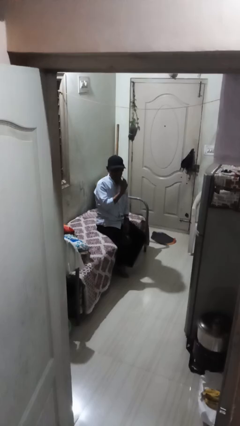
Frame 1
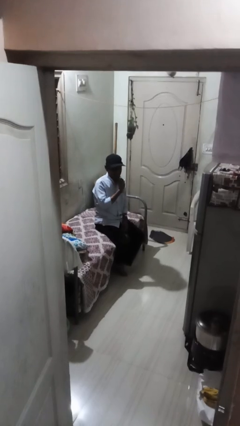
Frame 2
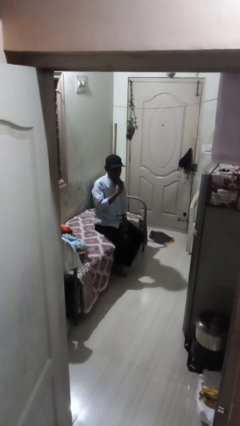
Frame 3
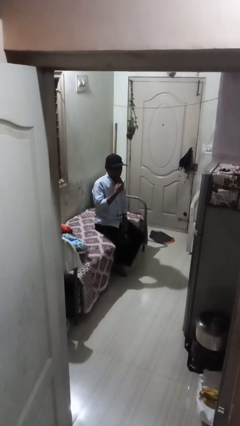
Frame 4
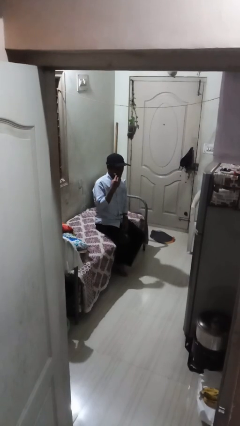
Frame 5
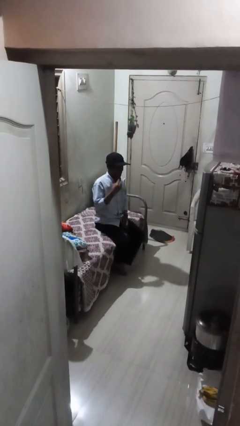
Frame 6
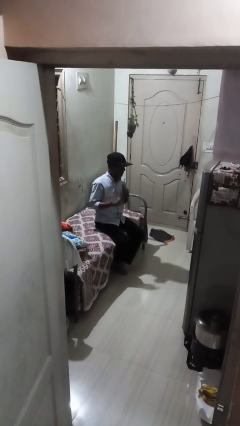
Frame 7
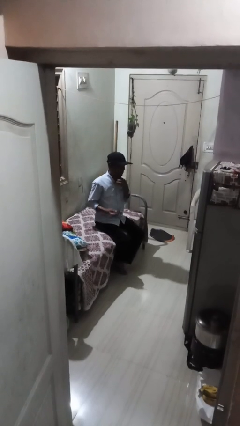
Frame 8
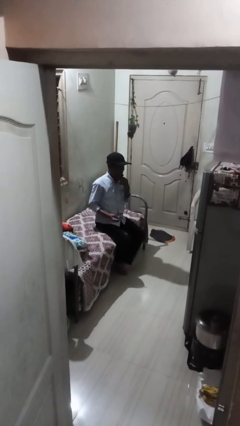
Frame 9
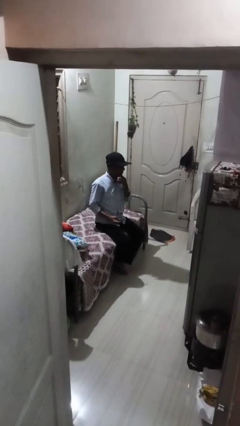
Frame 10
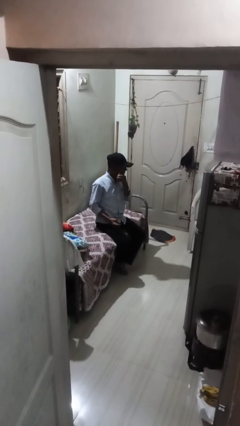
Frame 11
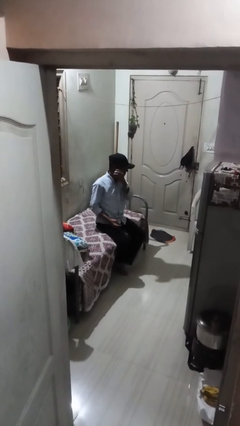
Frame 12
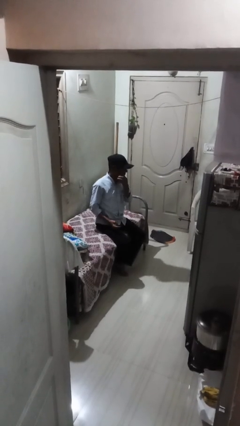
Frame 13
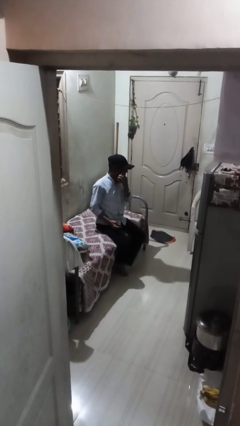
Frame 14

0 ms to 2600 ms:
person applies shaving cream

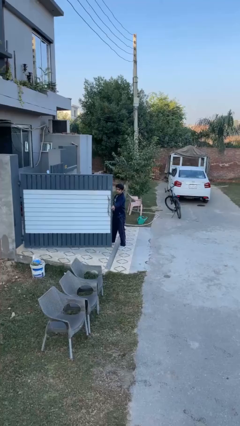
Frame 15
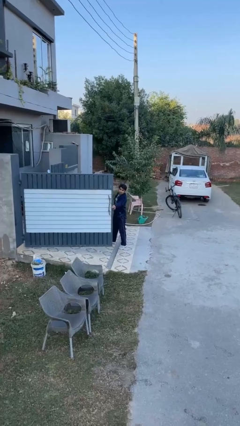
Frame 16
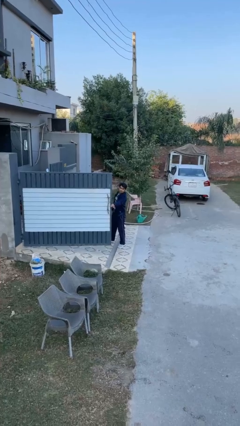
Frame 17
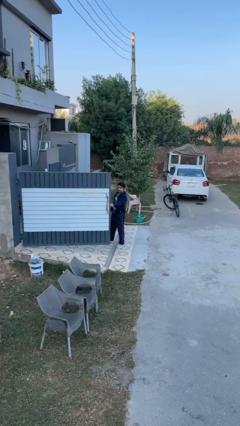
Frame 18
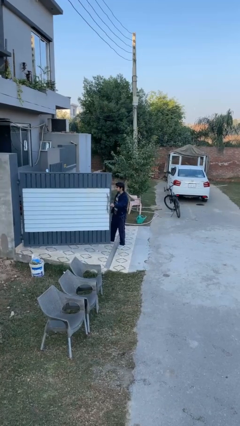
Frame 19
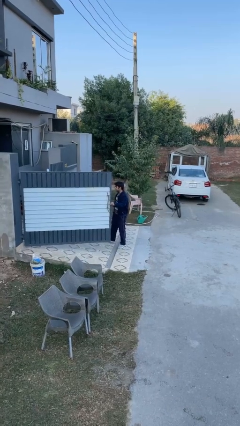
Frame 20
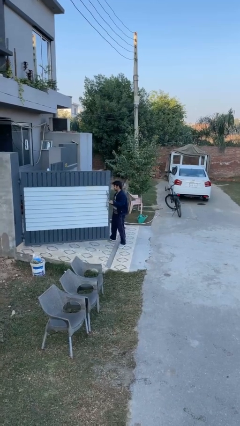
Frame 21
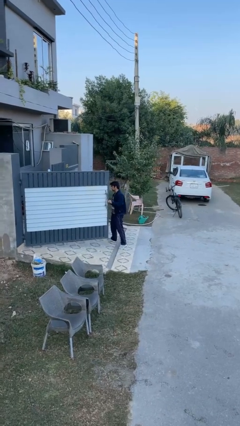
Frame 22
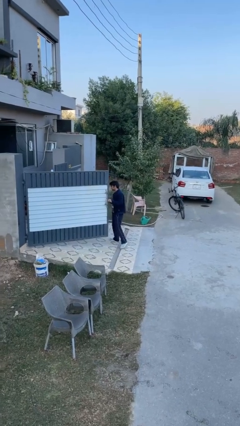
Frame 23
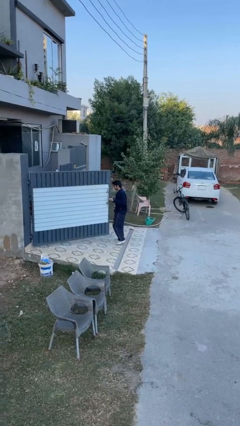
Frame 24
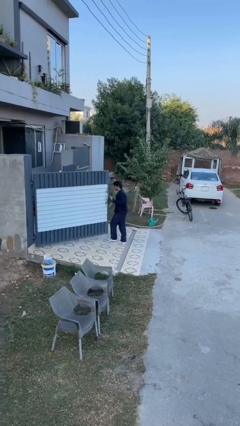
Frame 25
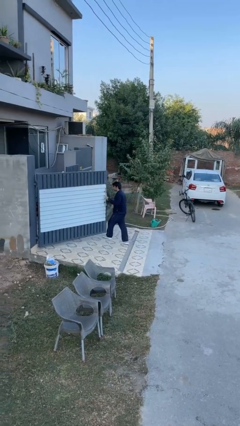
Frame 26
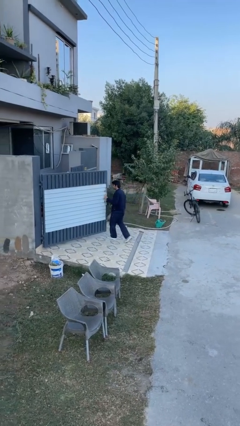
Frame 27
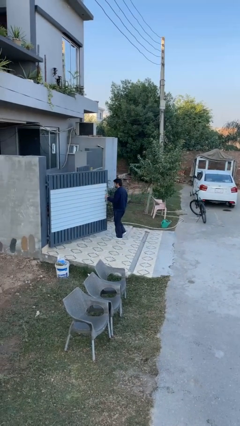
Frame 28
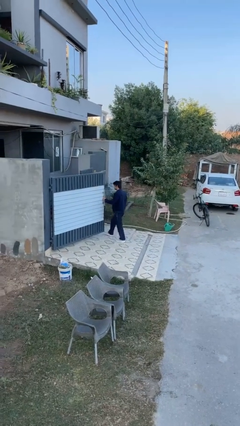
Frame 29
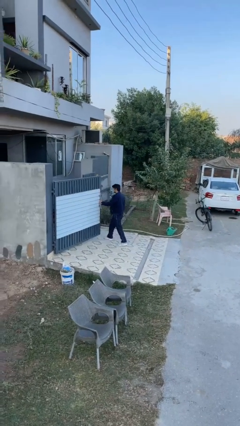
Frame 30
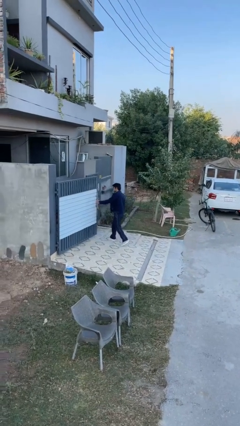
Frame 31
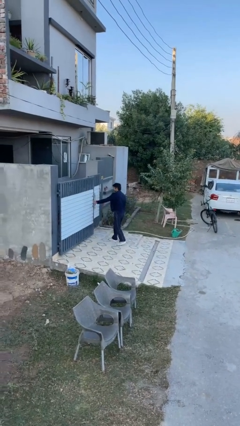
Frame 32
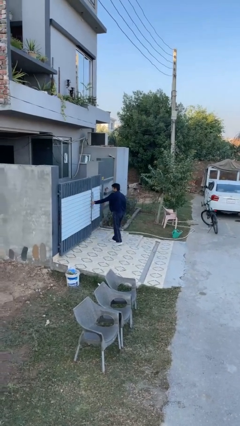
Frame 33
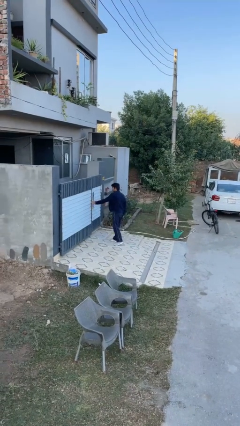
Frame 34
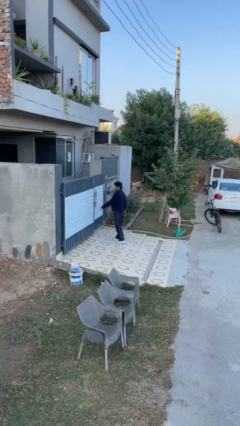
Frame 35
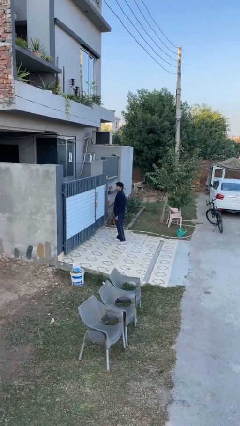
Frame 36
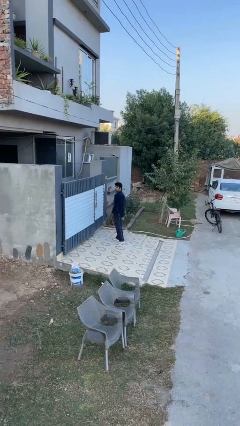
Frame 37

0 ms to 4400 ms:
person closes facility door

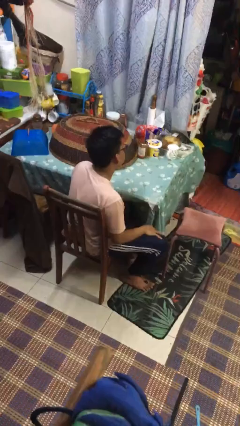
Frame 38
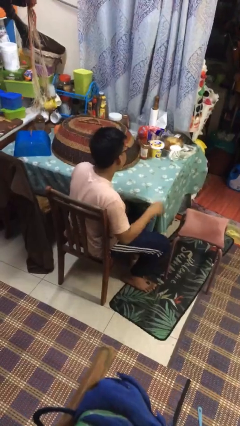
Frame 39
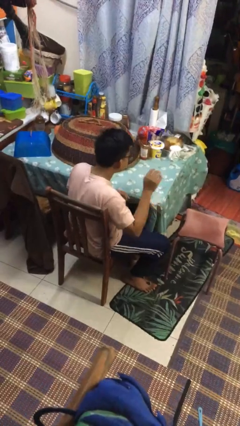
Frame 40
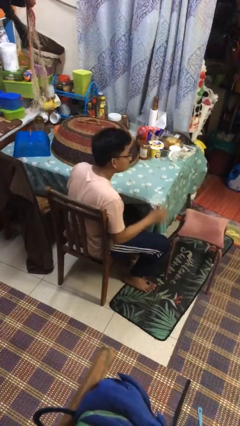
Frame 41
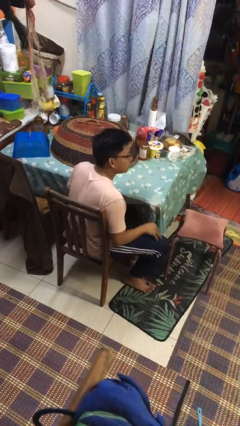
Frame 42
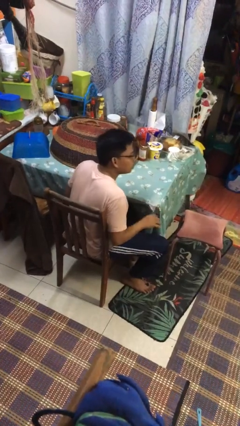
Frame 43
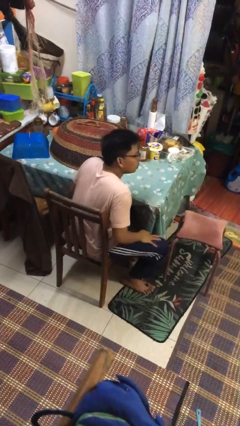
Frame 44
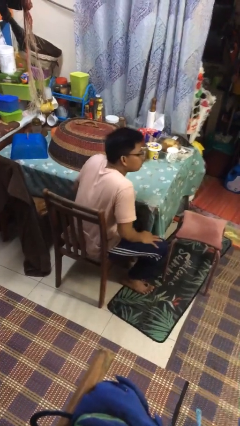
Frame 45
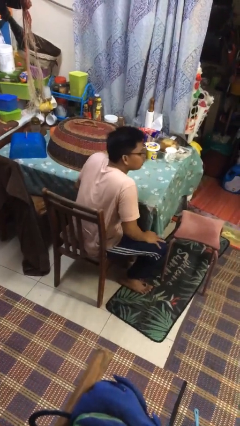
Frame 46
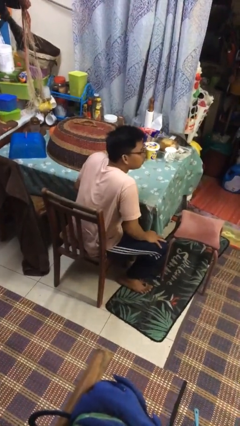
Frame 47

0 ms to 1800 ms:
person slaps hands on thighs

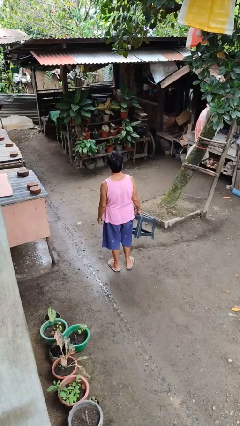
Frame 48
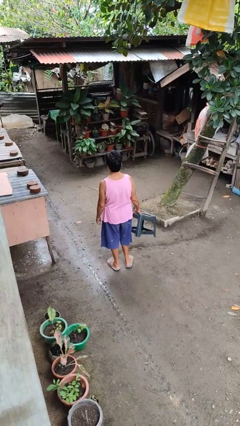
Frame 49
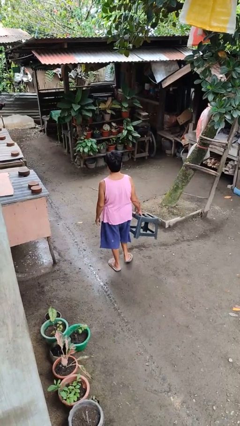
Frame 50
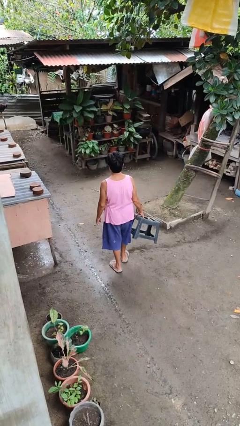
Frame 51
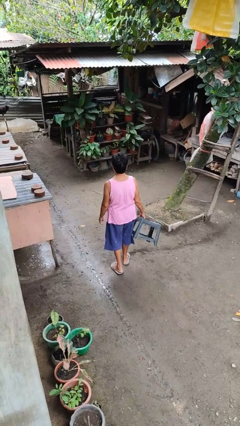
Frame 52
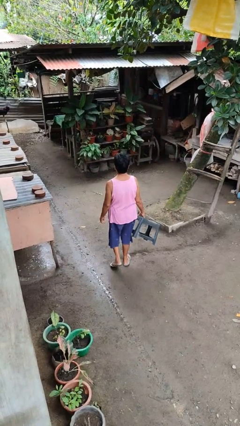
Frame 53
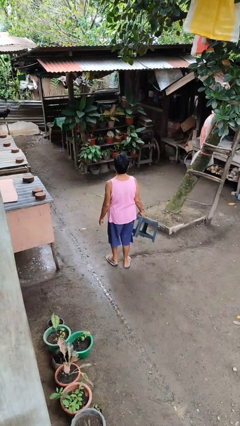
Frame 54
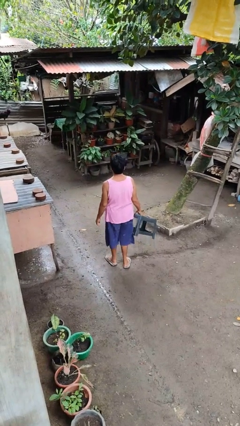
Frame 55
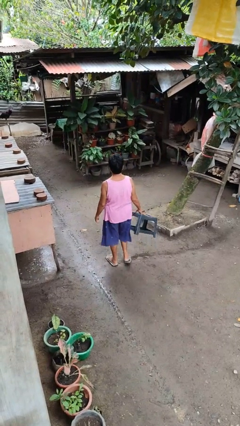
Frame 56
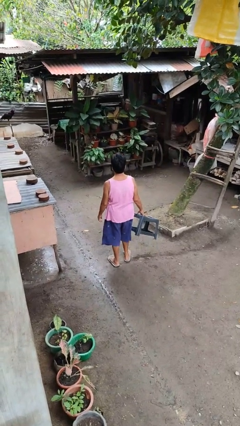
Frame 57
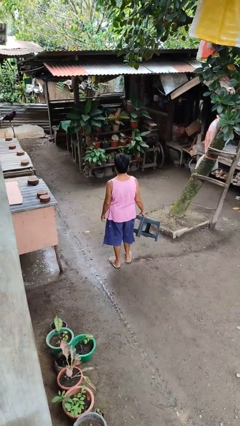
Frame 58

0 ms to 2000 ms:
person carries furniture

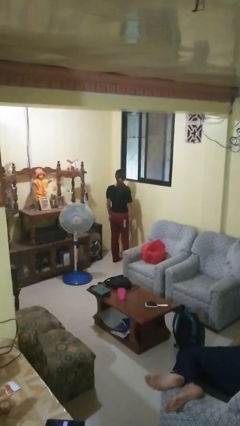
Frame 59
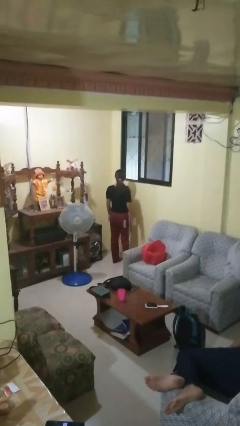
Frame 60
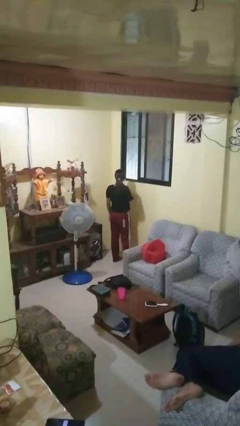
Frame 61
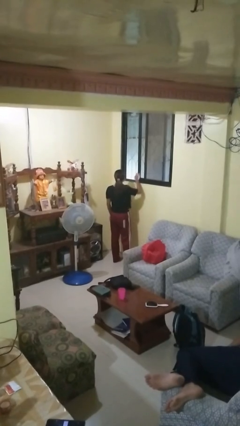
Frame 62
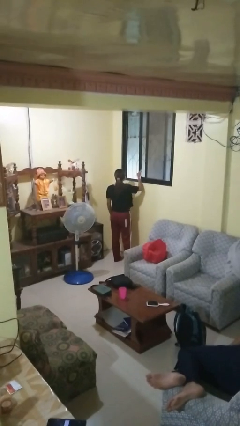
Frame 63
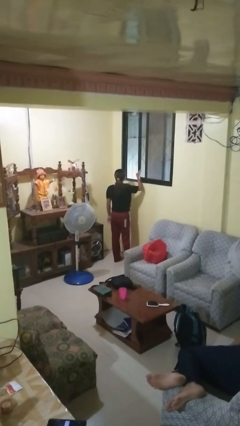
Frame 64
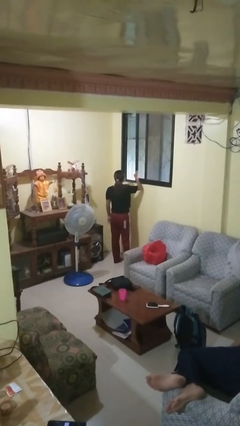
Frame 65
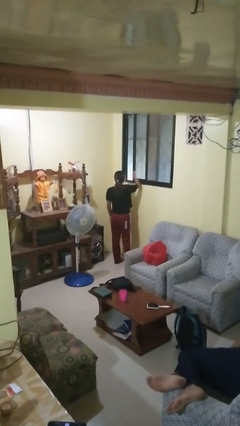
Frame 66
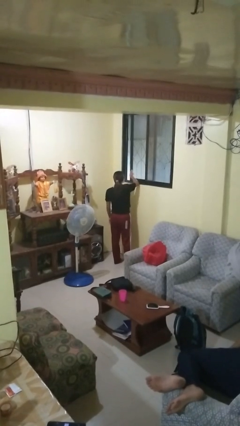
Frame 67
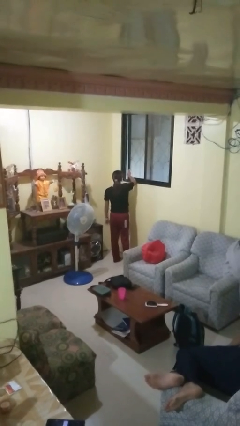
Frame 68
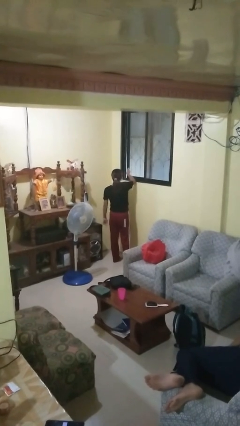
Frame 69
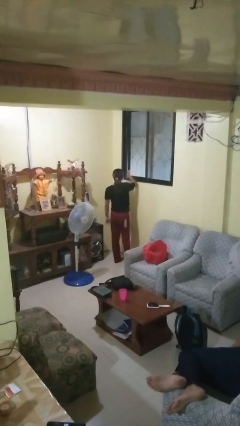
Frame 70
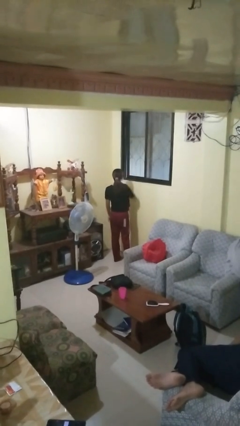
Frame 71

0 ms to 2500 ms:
person closes home window

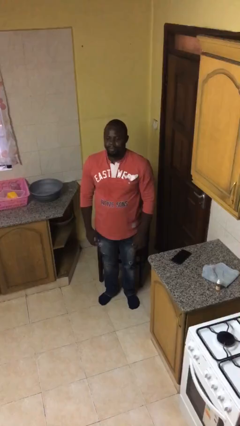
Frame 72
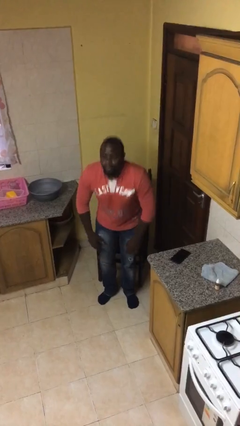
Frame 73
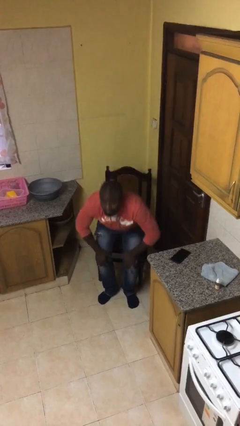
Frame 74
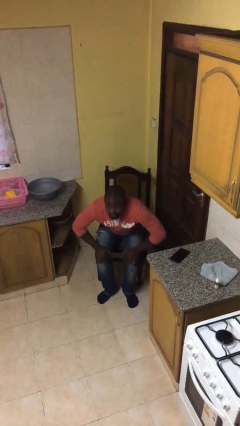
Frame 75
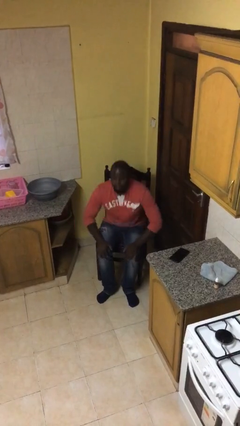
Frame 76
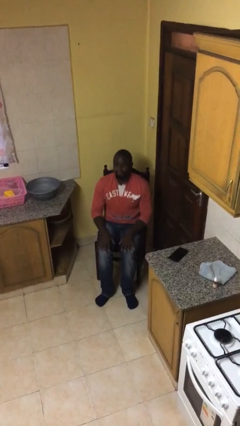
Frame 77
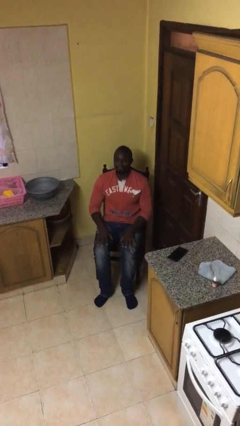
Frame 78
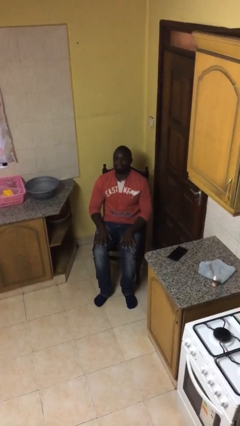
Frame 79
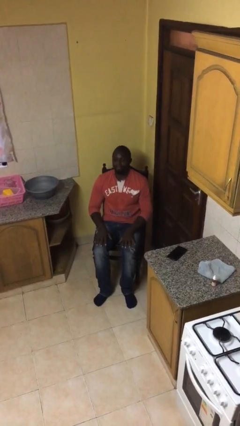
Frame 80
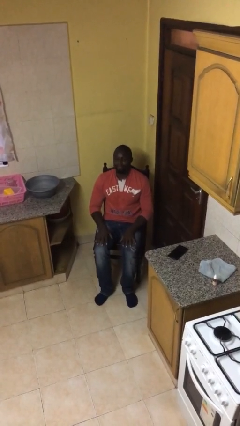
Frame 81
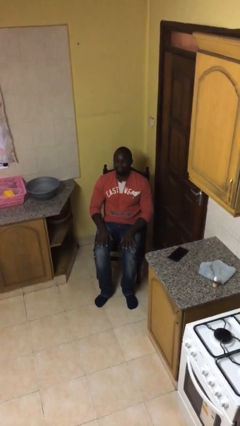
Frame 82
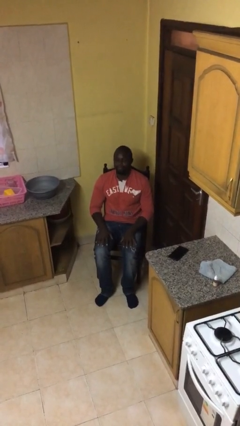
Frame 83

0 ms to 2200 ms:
person sits down

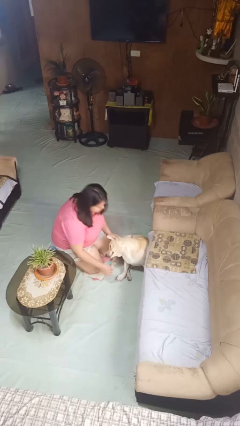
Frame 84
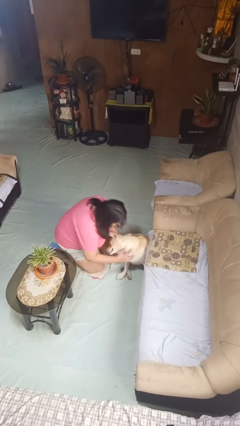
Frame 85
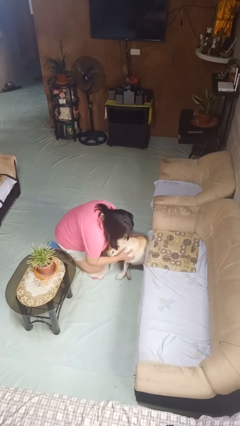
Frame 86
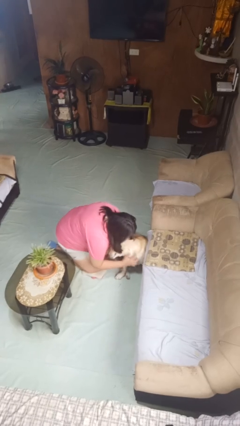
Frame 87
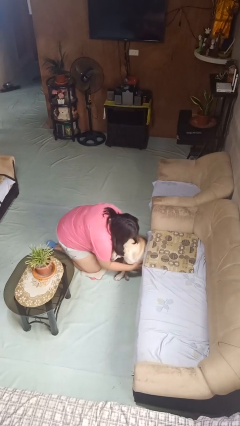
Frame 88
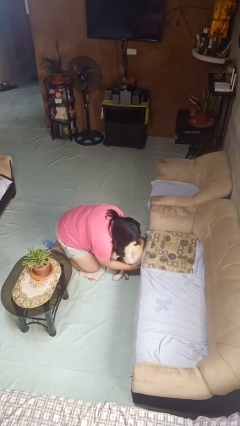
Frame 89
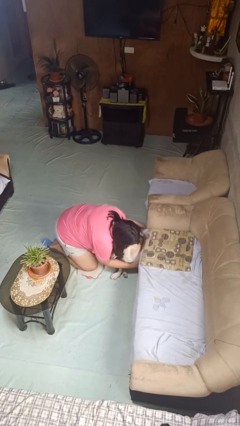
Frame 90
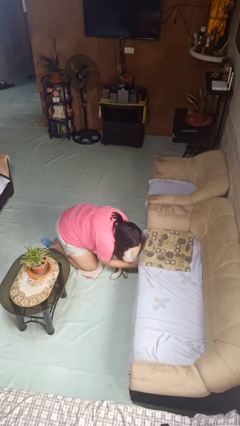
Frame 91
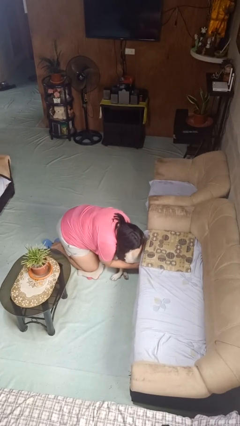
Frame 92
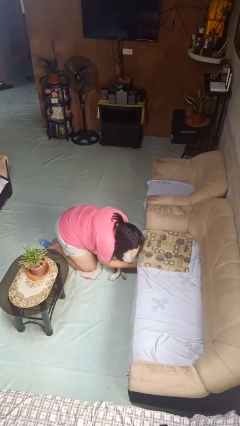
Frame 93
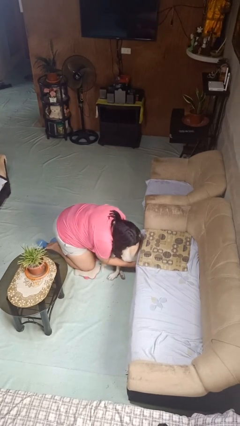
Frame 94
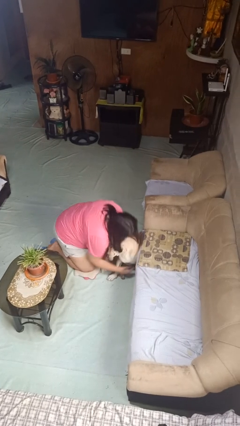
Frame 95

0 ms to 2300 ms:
person hugs dog
